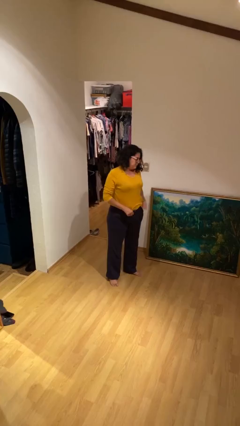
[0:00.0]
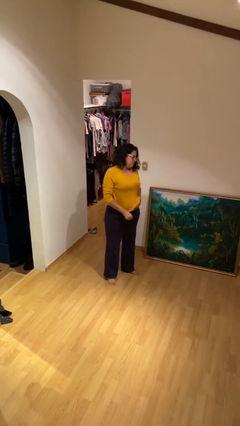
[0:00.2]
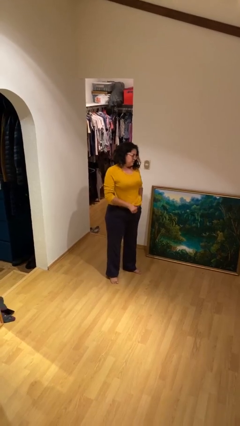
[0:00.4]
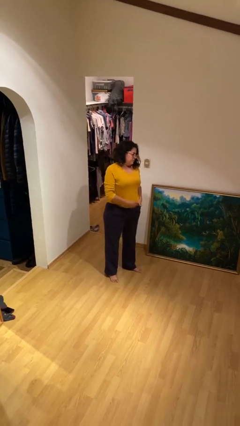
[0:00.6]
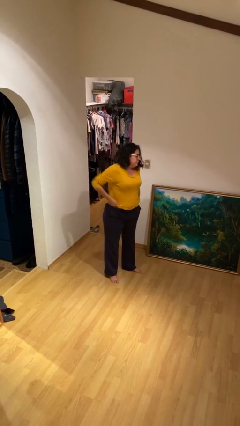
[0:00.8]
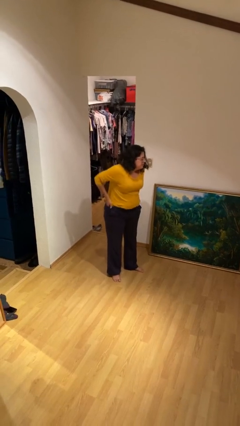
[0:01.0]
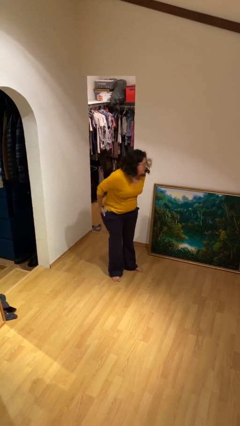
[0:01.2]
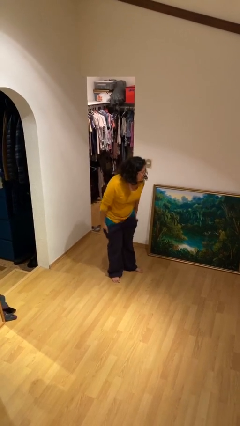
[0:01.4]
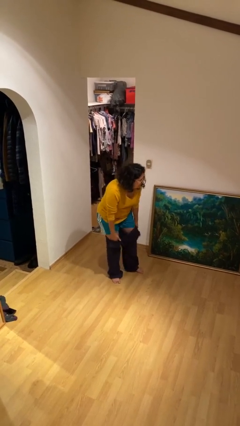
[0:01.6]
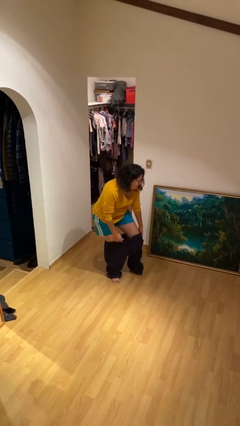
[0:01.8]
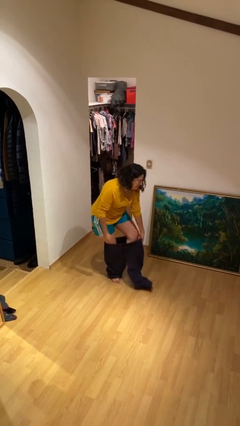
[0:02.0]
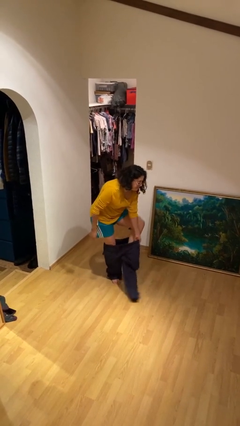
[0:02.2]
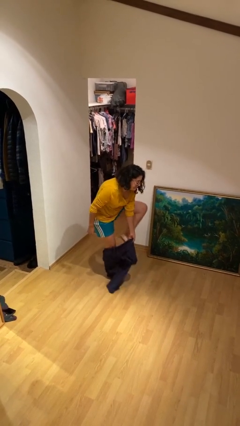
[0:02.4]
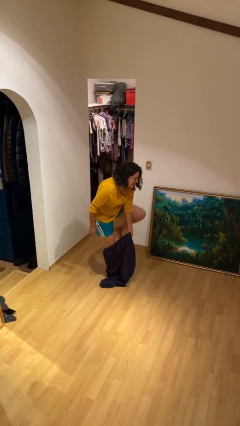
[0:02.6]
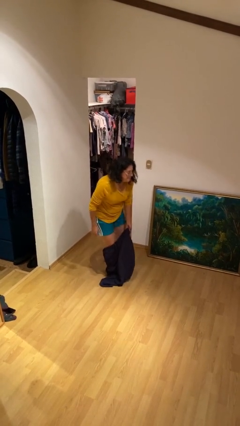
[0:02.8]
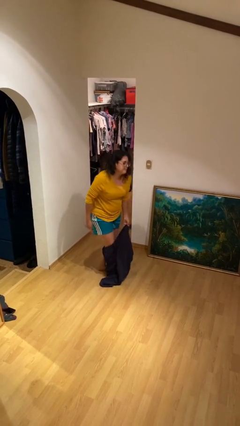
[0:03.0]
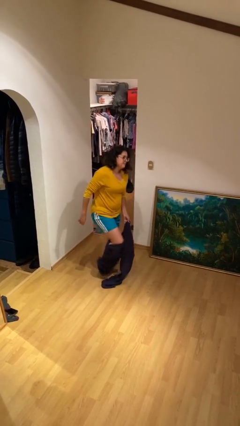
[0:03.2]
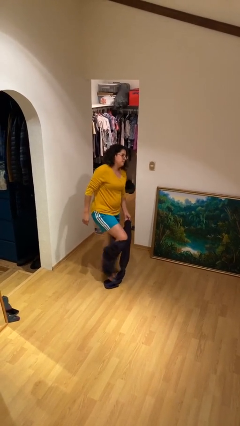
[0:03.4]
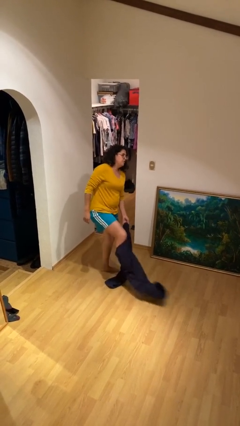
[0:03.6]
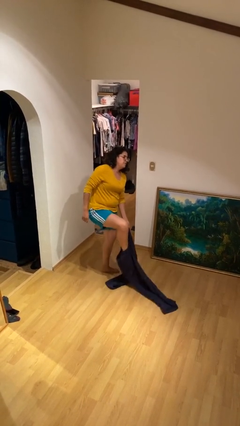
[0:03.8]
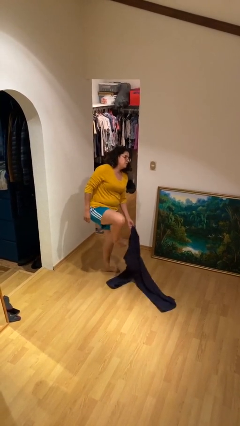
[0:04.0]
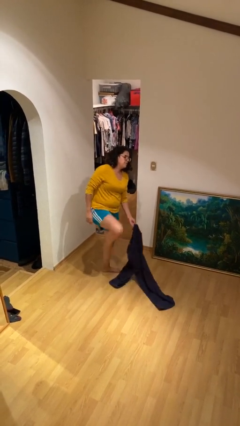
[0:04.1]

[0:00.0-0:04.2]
person takes off pants

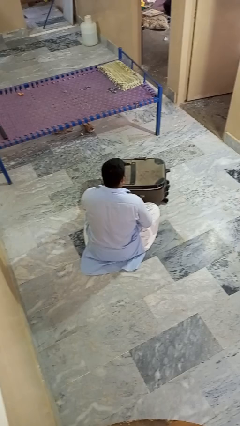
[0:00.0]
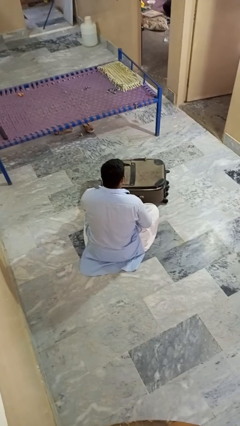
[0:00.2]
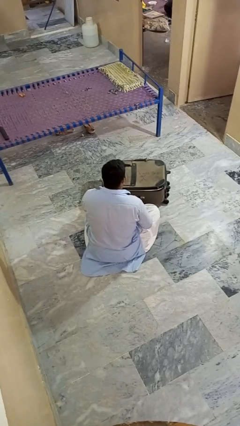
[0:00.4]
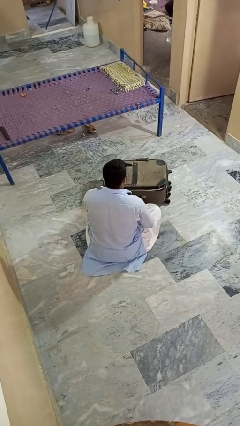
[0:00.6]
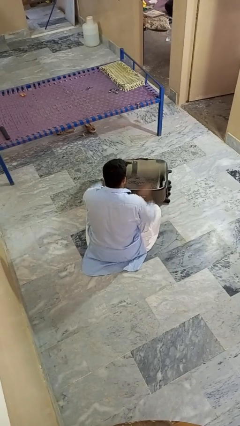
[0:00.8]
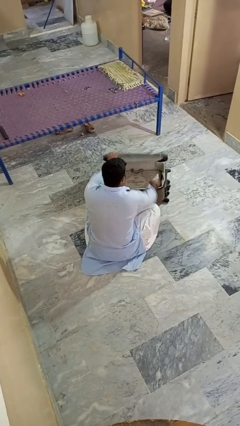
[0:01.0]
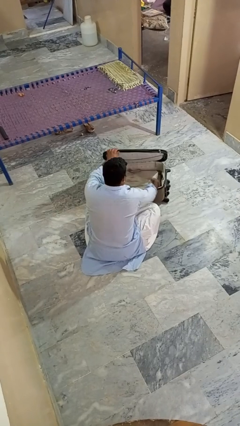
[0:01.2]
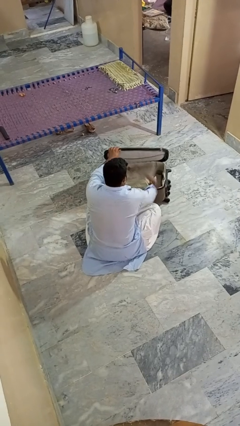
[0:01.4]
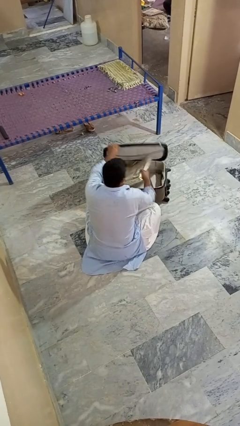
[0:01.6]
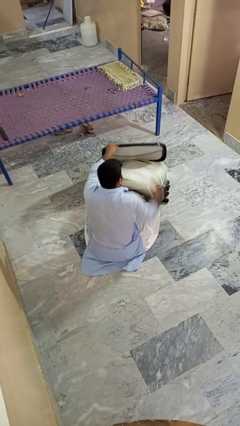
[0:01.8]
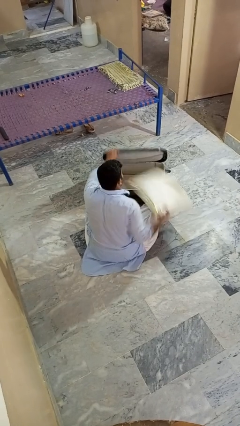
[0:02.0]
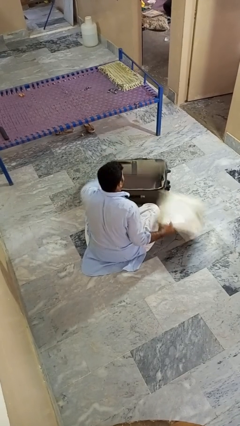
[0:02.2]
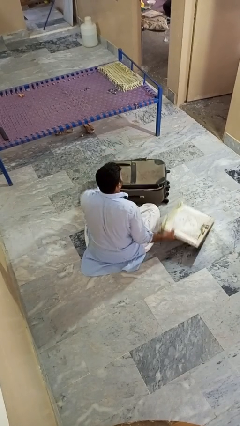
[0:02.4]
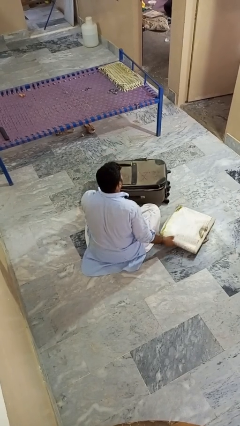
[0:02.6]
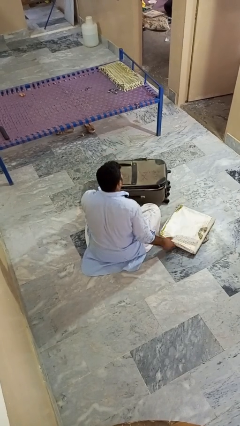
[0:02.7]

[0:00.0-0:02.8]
person takes object from bag

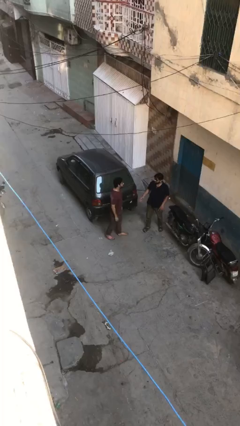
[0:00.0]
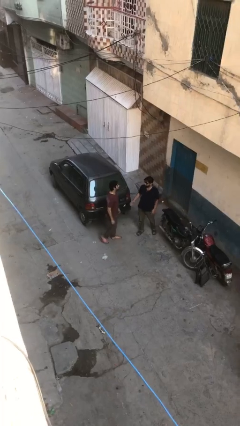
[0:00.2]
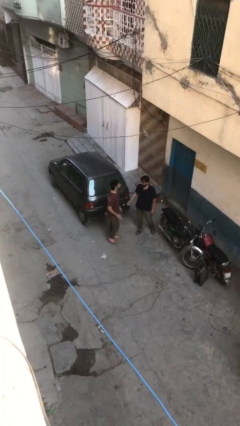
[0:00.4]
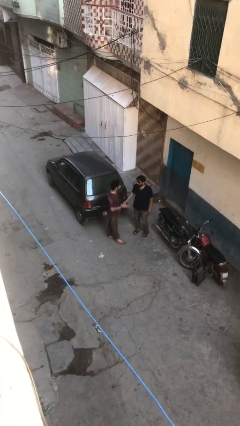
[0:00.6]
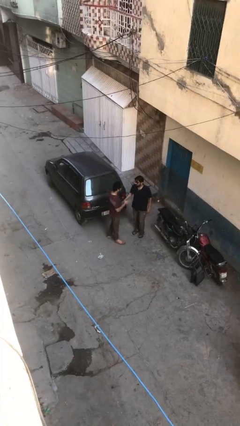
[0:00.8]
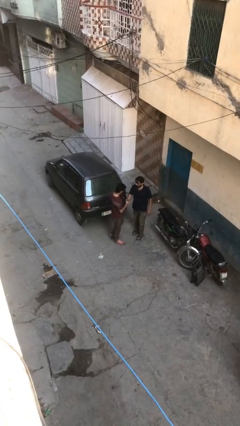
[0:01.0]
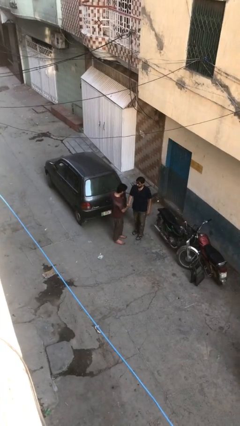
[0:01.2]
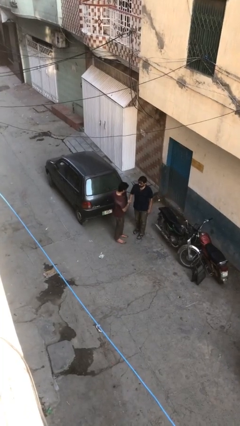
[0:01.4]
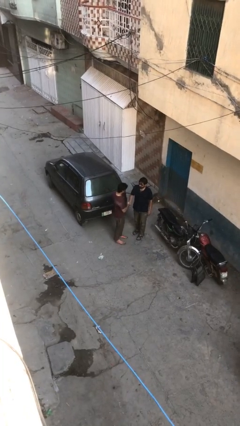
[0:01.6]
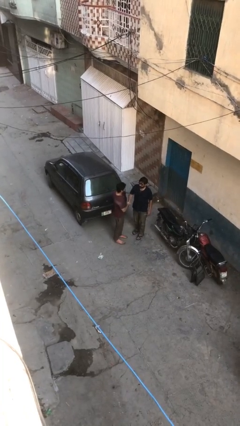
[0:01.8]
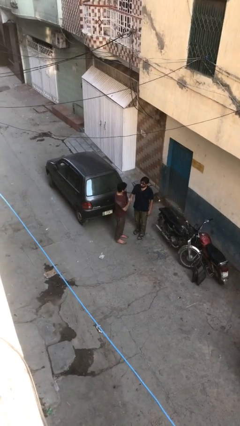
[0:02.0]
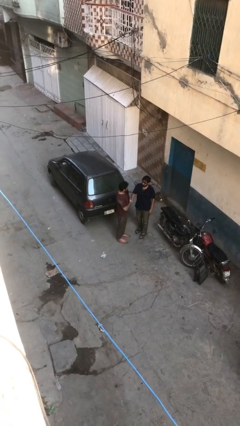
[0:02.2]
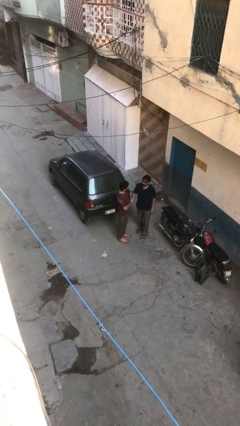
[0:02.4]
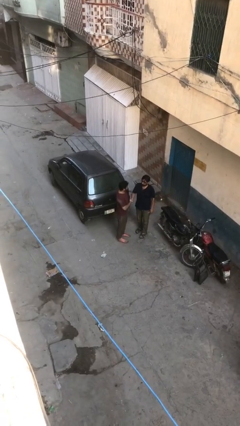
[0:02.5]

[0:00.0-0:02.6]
person shakes hand

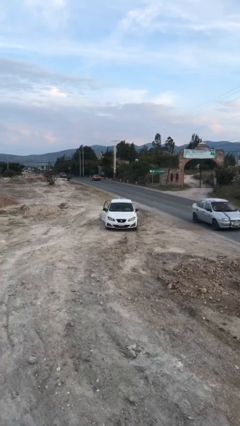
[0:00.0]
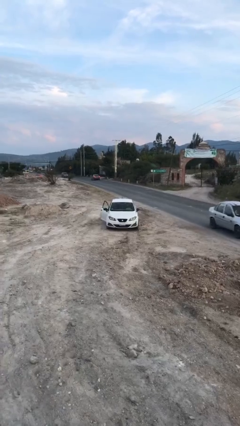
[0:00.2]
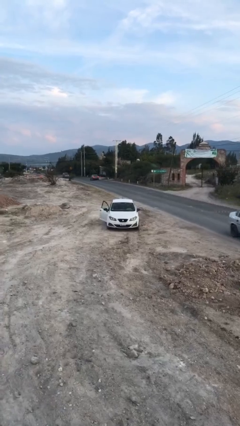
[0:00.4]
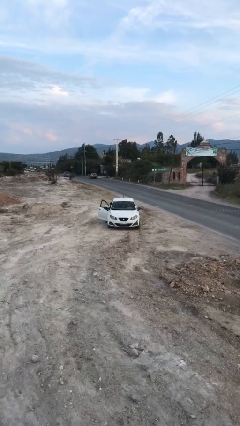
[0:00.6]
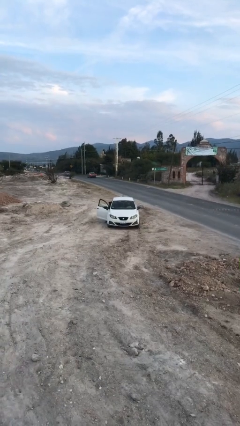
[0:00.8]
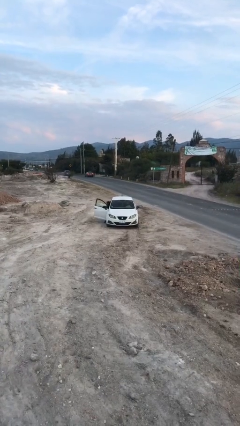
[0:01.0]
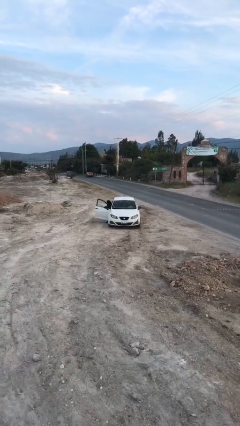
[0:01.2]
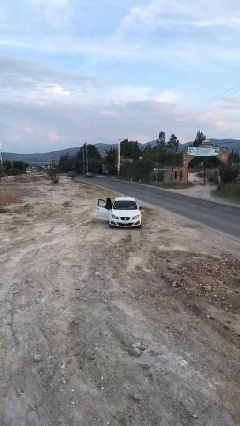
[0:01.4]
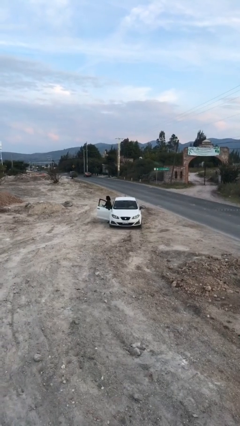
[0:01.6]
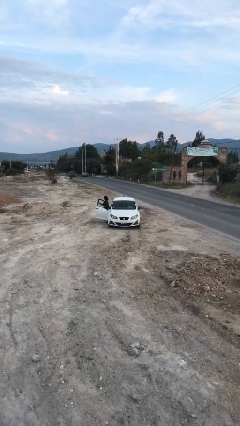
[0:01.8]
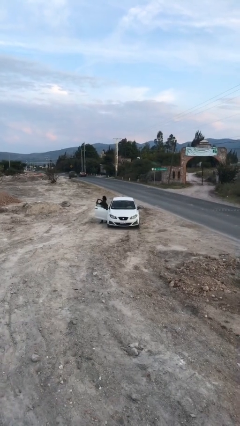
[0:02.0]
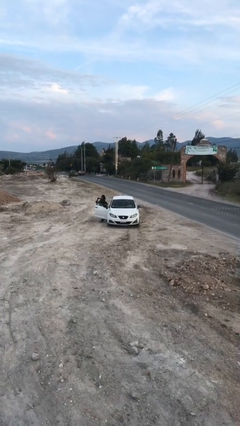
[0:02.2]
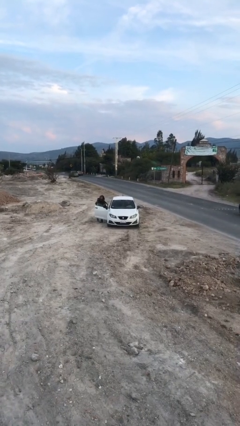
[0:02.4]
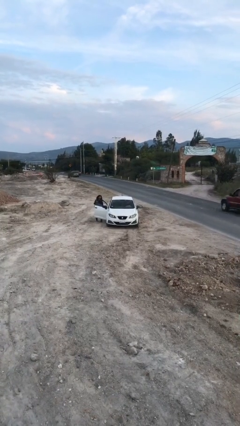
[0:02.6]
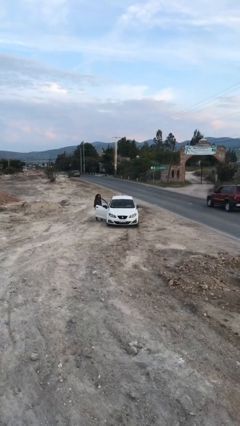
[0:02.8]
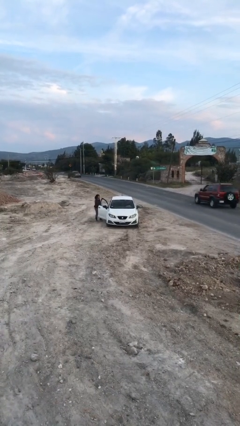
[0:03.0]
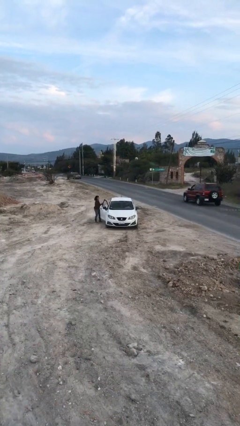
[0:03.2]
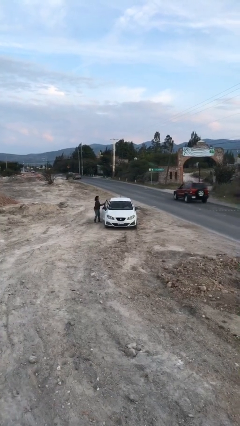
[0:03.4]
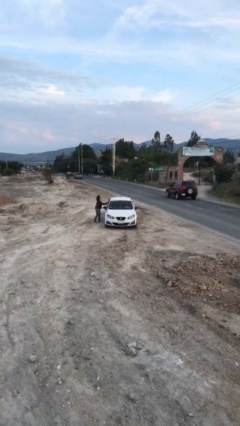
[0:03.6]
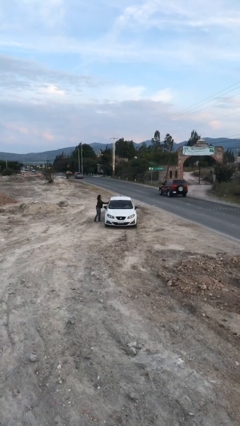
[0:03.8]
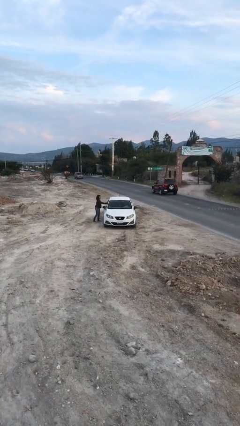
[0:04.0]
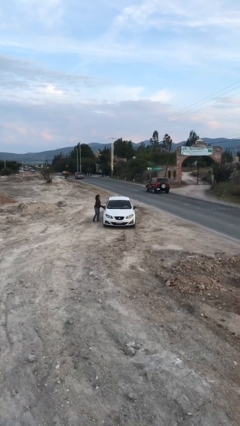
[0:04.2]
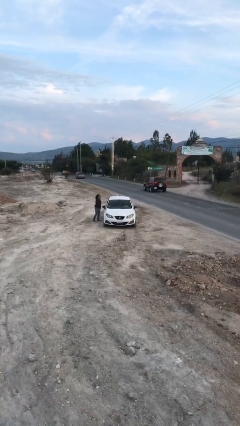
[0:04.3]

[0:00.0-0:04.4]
car drops off person

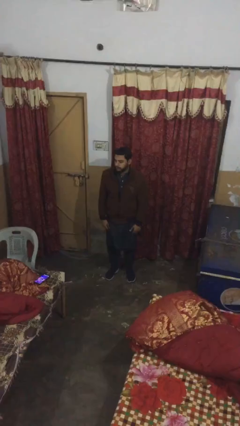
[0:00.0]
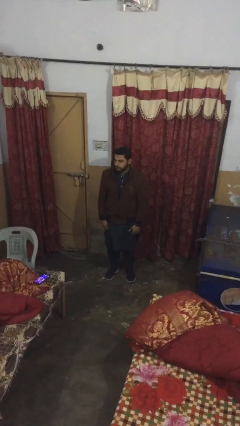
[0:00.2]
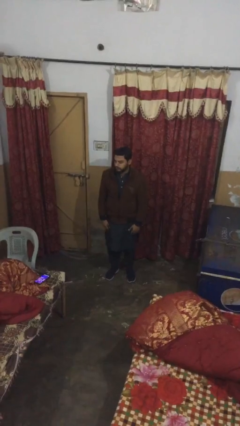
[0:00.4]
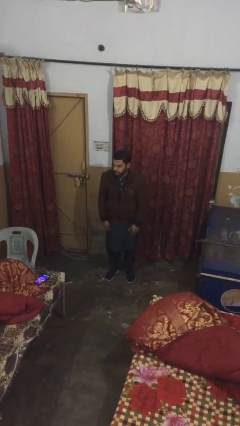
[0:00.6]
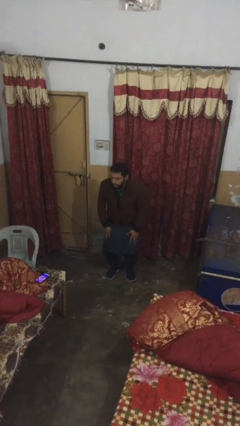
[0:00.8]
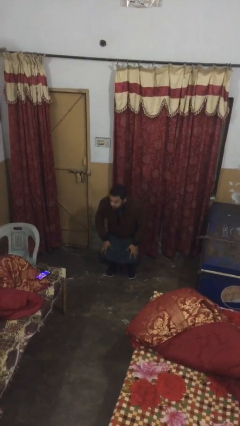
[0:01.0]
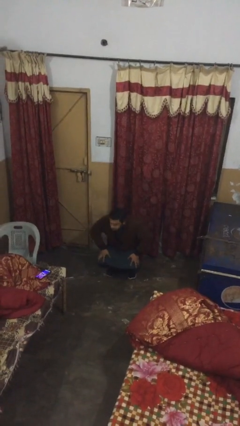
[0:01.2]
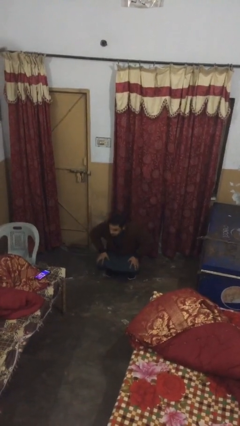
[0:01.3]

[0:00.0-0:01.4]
person sits down

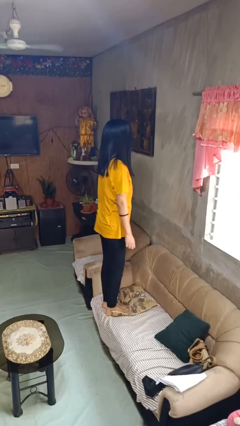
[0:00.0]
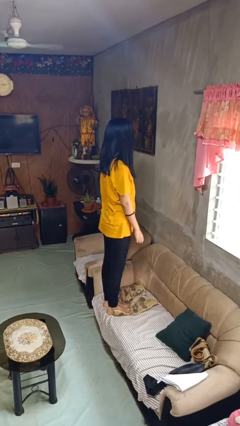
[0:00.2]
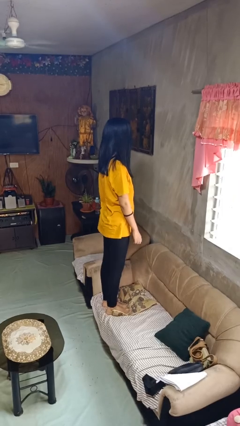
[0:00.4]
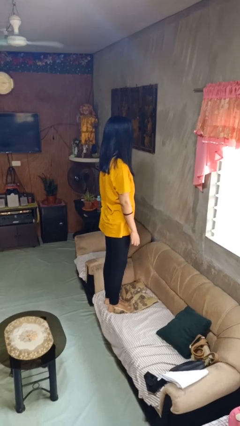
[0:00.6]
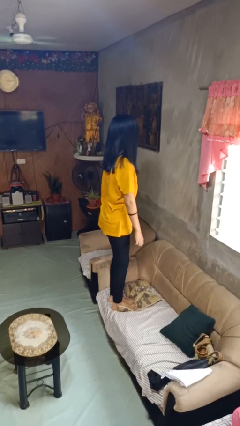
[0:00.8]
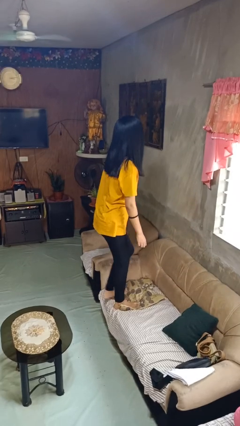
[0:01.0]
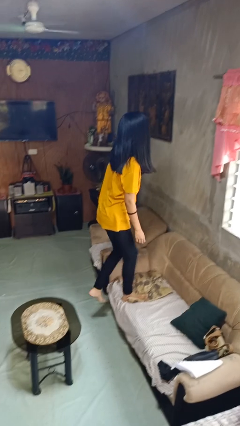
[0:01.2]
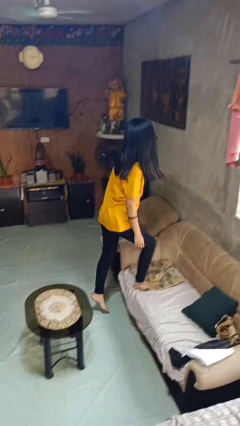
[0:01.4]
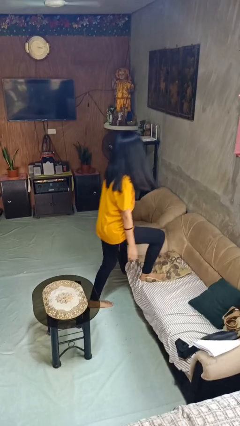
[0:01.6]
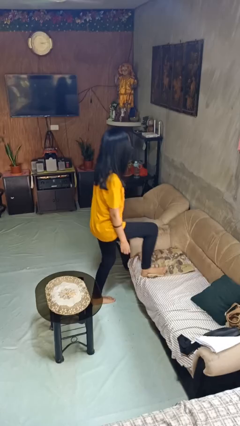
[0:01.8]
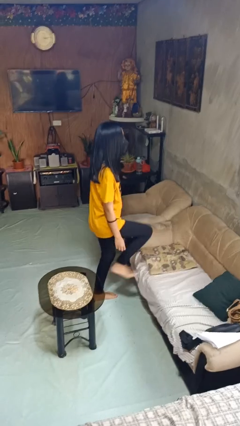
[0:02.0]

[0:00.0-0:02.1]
person climbs off couch
